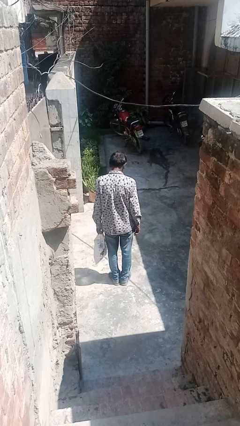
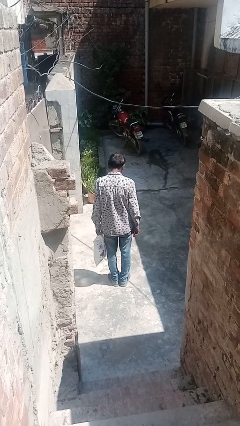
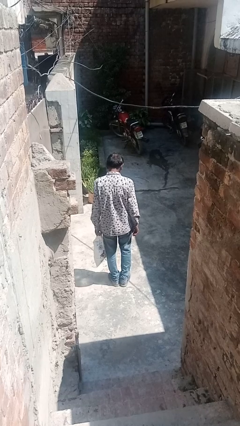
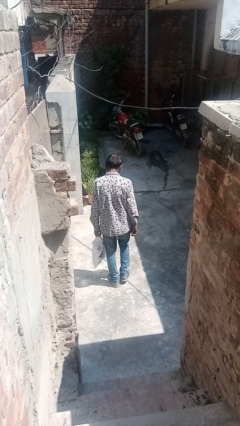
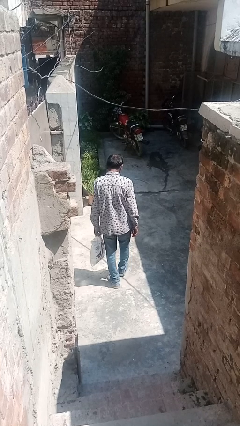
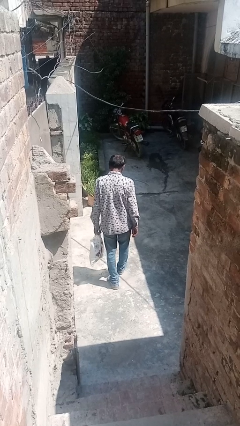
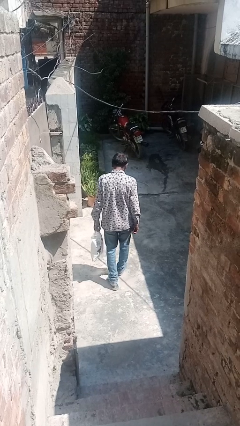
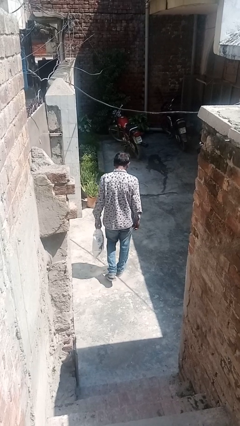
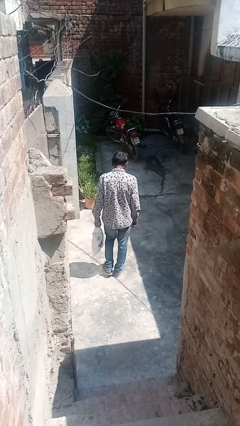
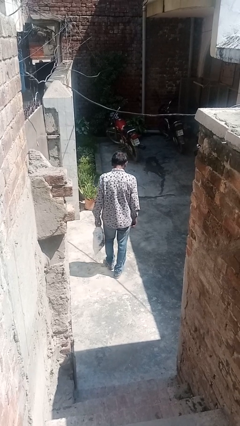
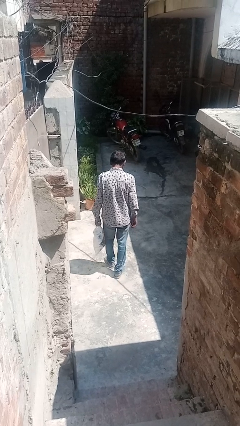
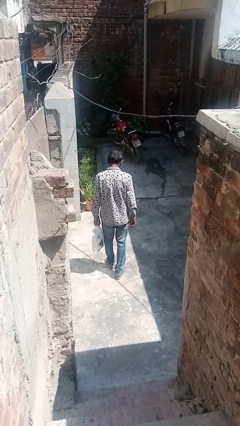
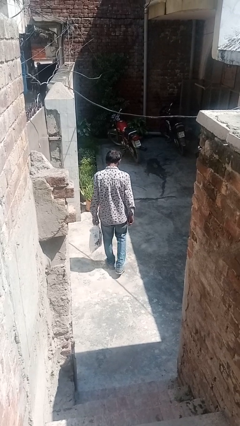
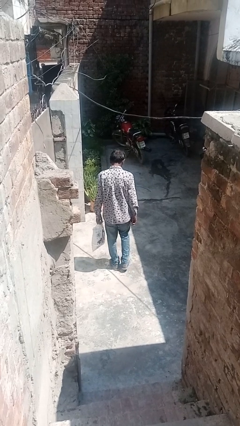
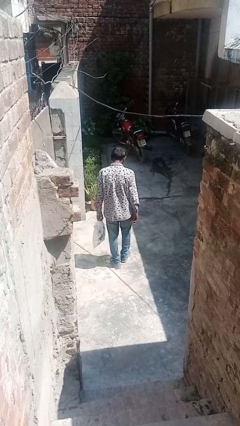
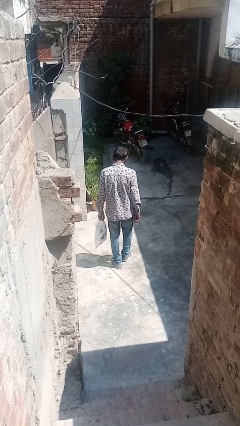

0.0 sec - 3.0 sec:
person carries groceries

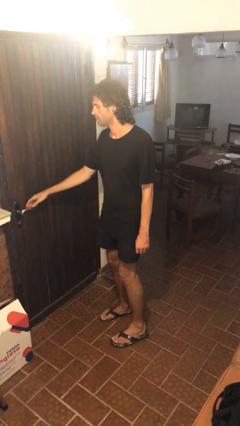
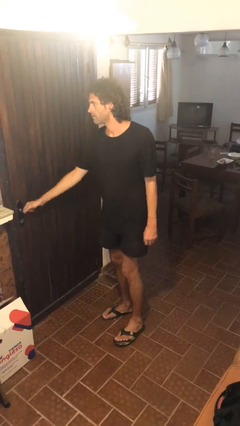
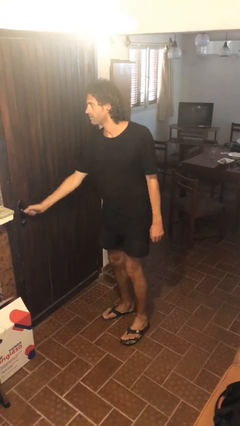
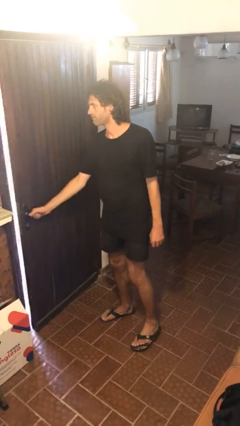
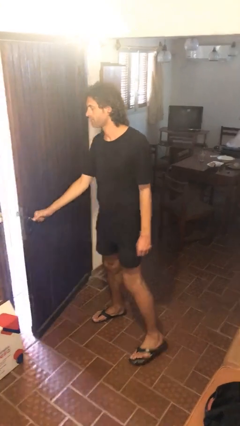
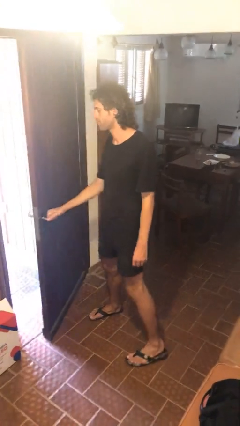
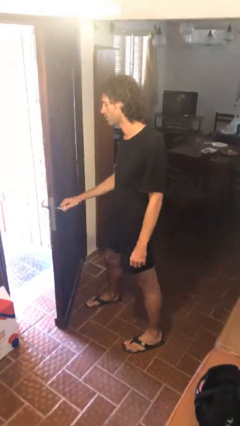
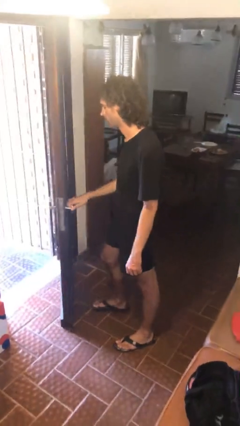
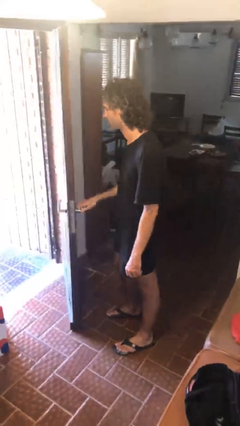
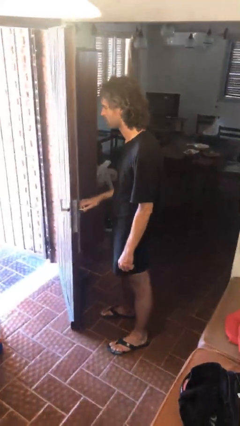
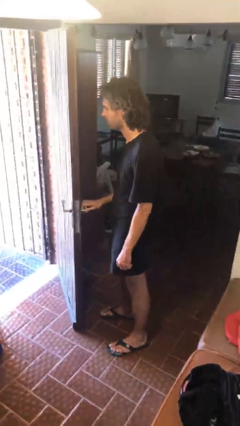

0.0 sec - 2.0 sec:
person opens facility door

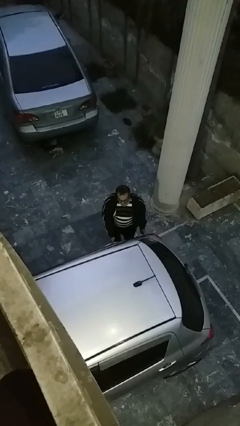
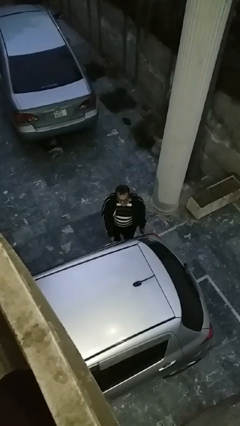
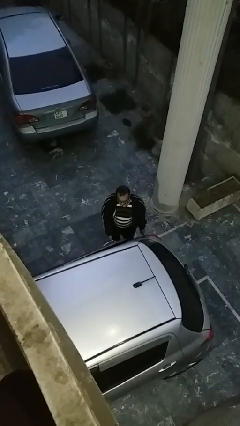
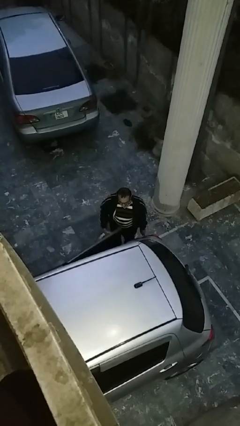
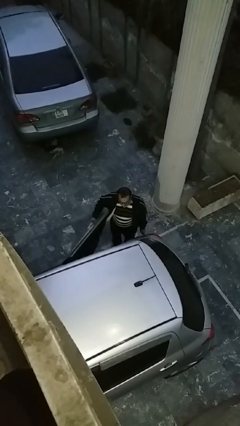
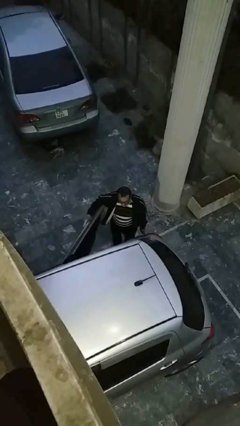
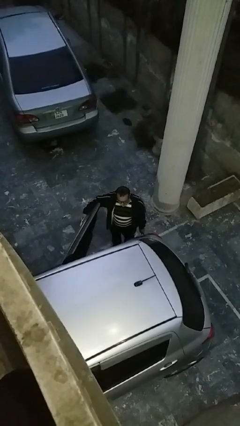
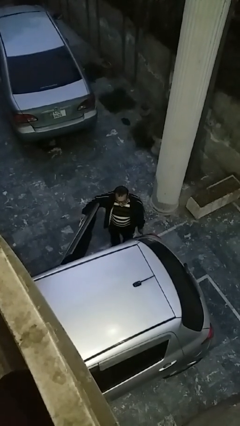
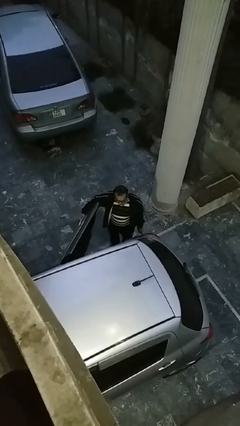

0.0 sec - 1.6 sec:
person opens car door

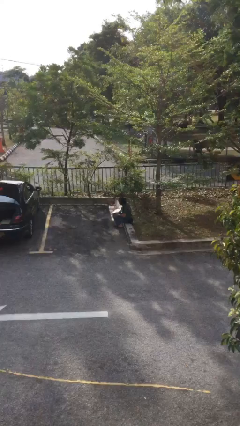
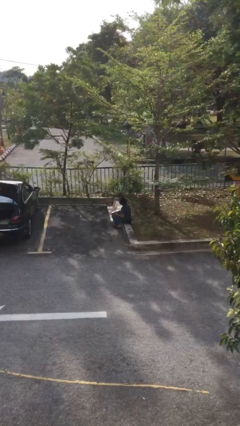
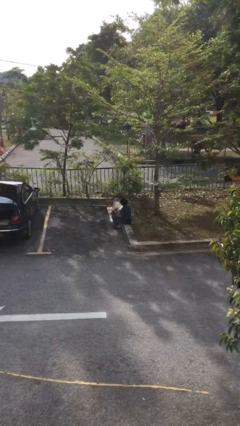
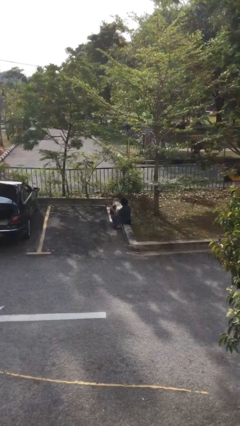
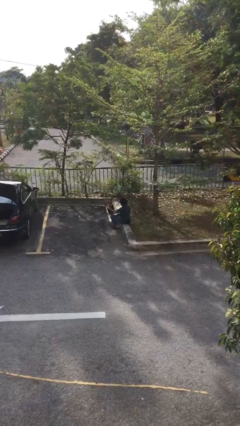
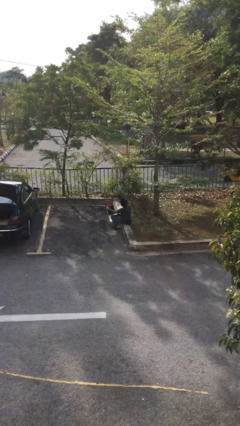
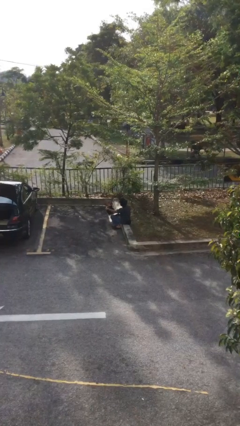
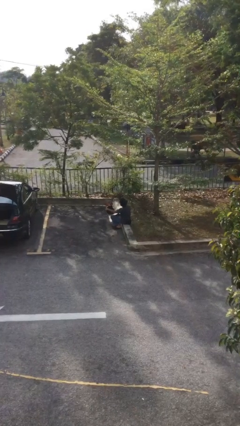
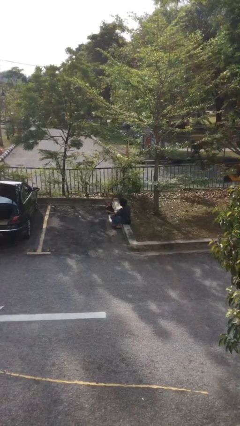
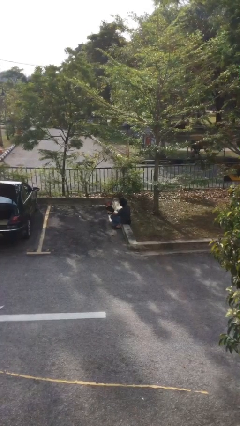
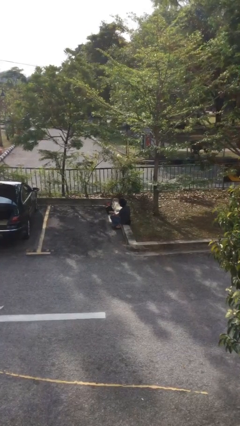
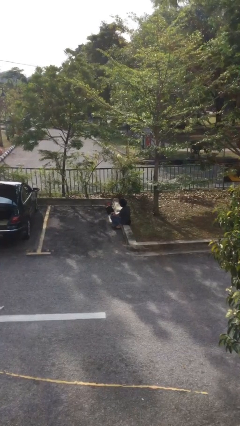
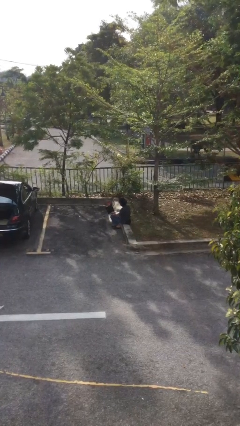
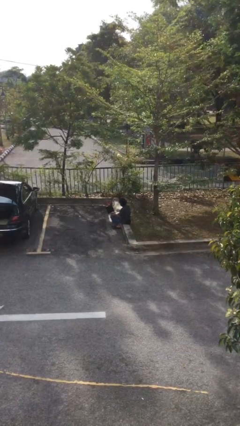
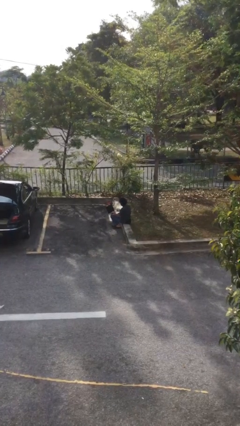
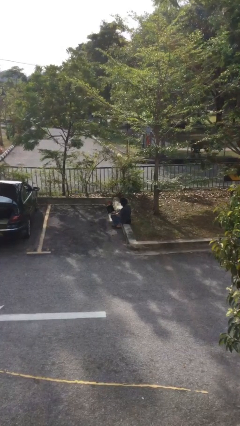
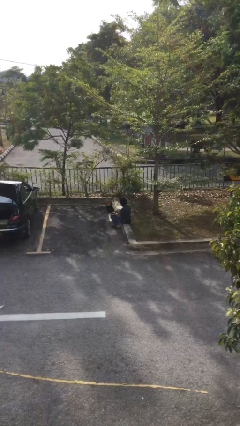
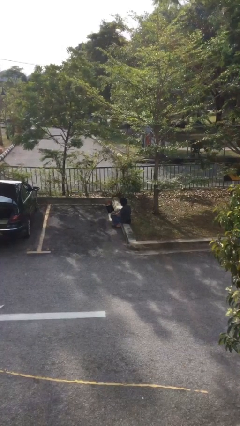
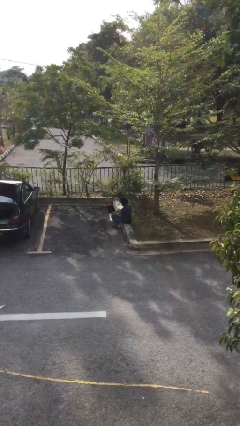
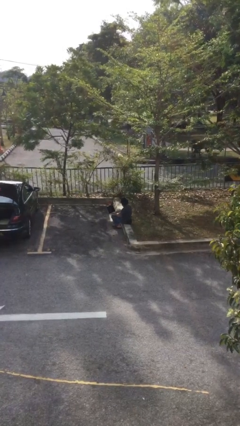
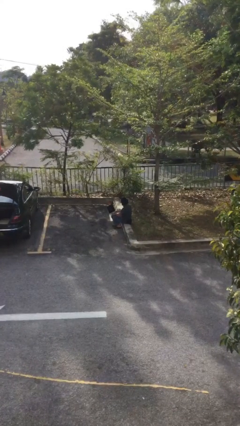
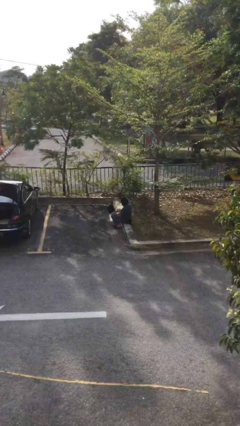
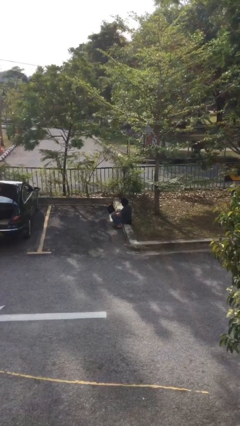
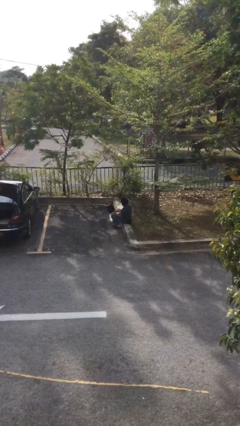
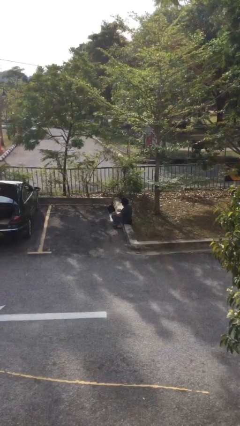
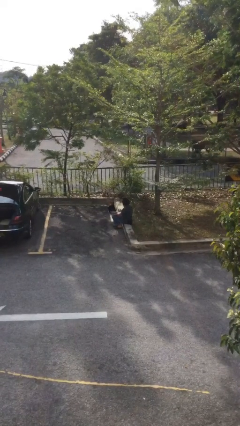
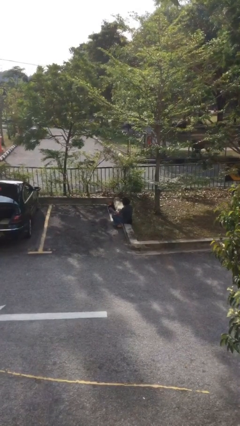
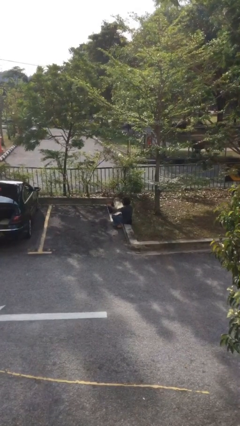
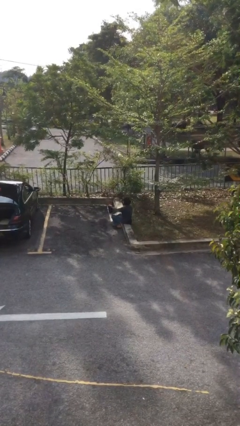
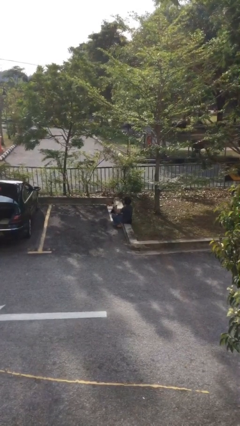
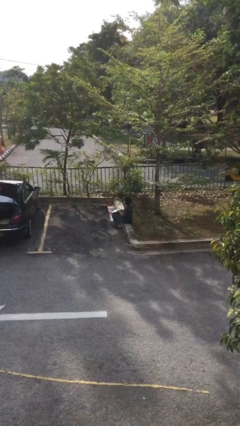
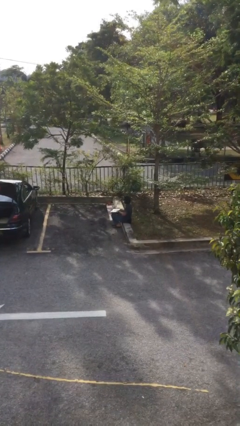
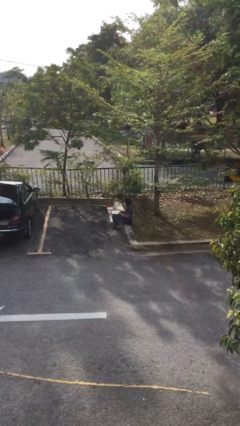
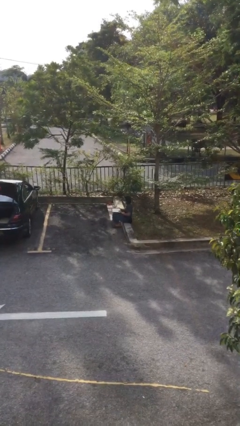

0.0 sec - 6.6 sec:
person interacts with laptop

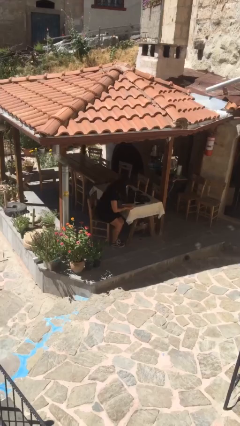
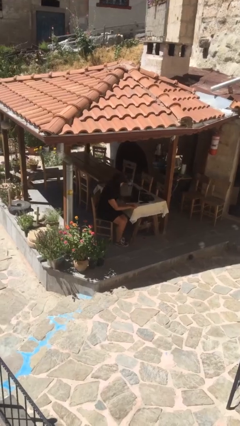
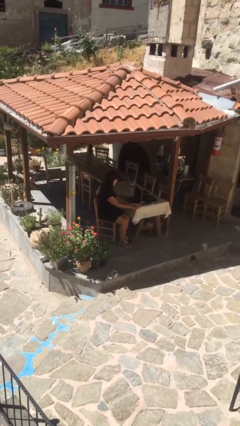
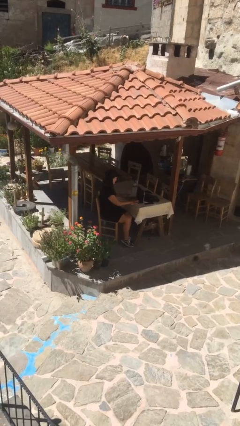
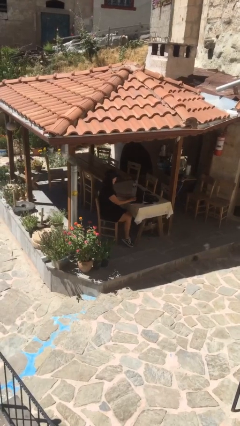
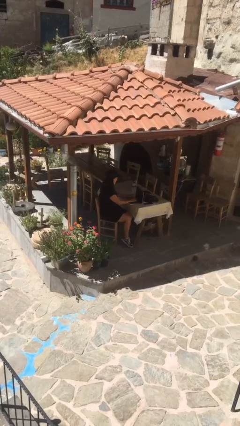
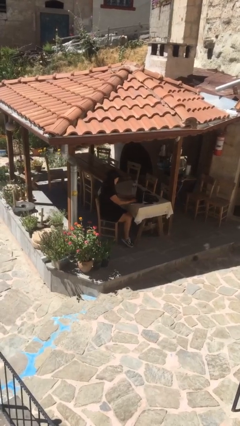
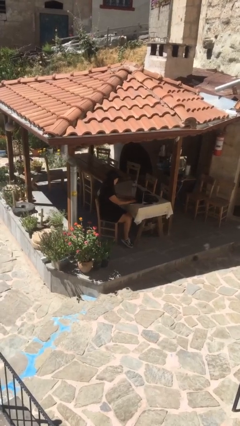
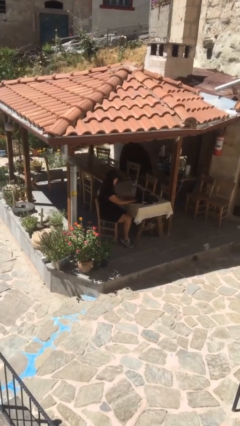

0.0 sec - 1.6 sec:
person sits down

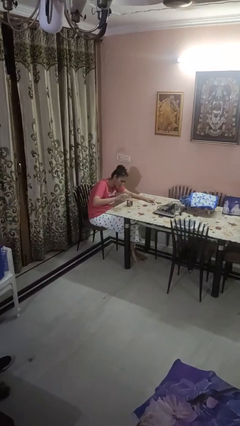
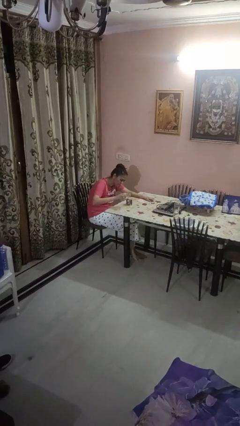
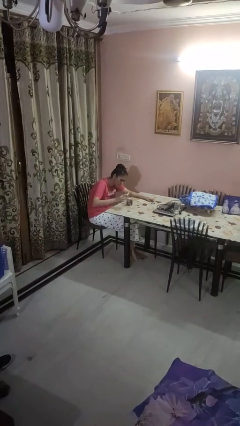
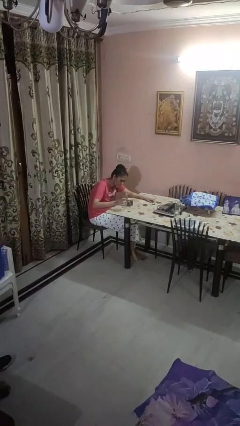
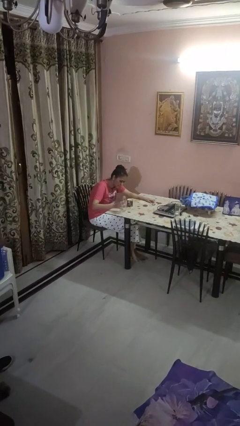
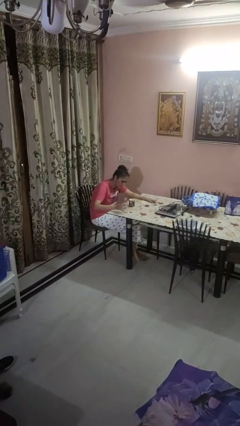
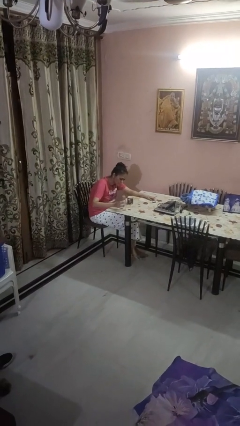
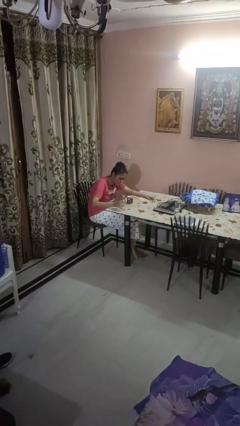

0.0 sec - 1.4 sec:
person pours liquid into cup

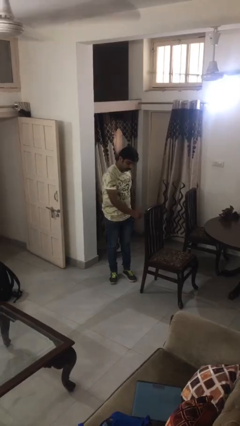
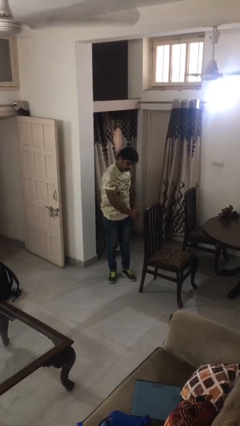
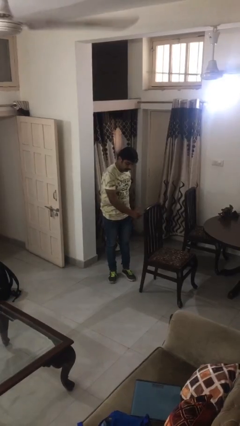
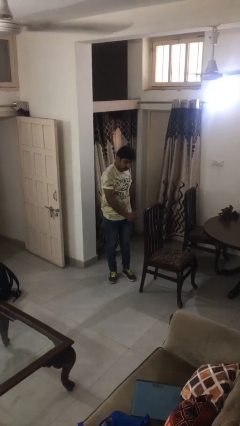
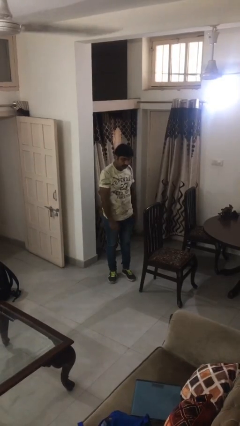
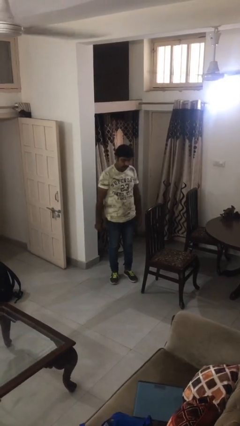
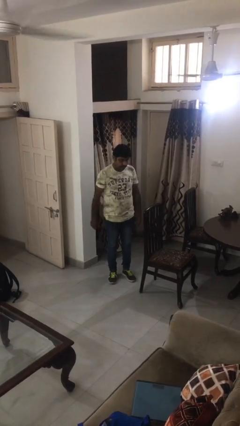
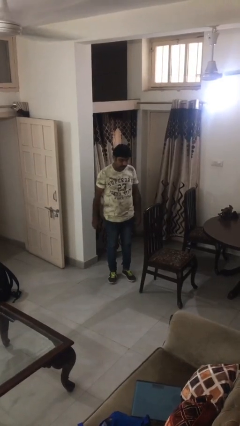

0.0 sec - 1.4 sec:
person taps object with finger
